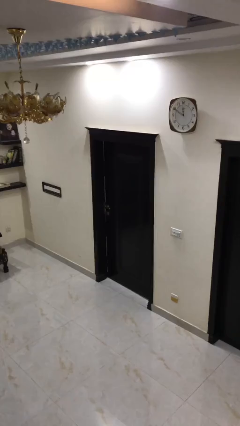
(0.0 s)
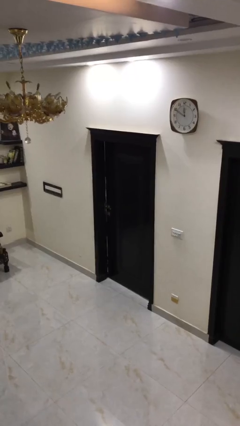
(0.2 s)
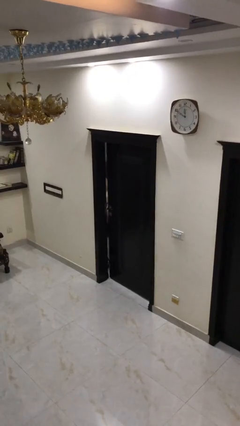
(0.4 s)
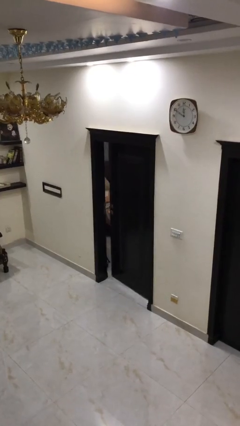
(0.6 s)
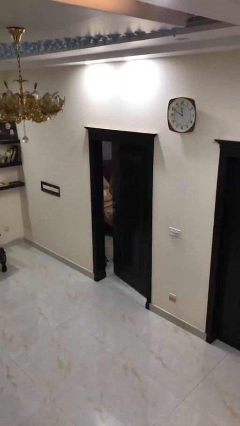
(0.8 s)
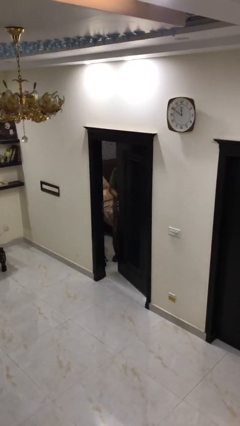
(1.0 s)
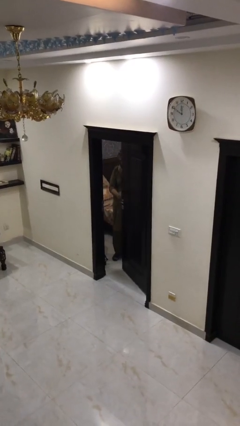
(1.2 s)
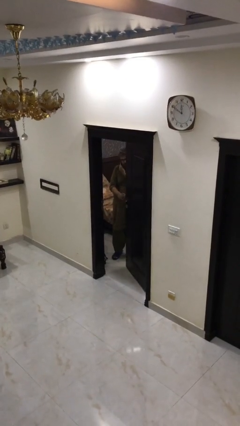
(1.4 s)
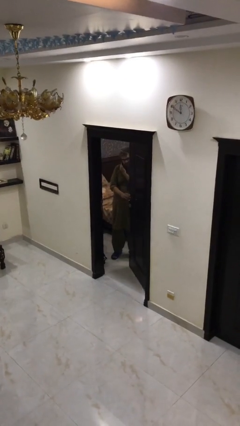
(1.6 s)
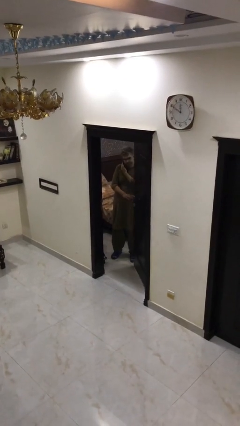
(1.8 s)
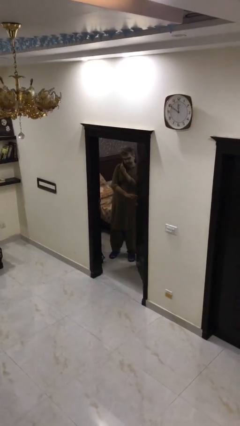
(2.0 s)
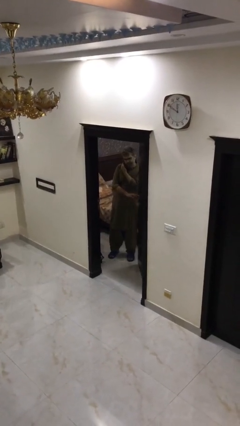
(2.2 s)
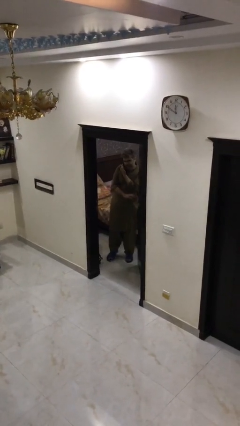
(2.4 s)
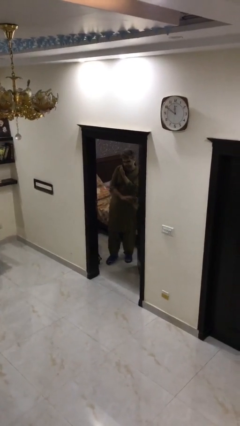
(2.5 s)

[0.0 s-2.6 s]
person opens facility door

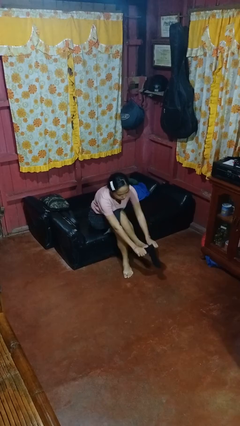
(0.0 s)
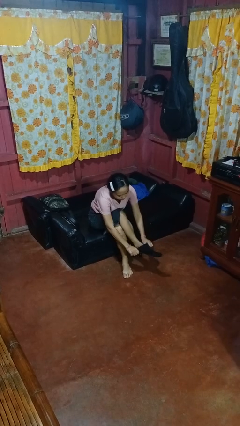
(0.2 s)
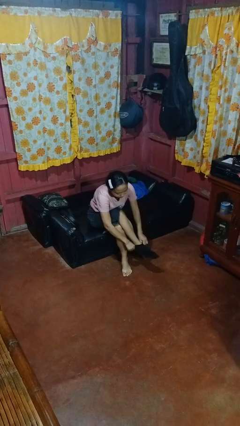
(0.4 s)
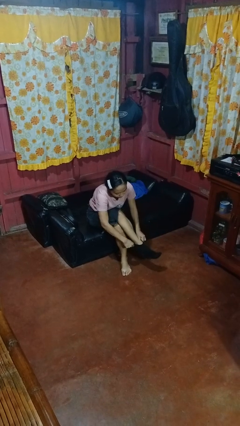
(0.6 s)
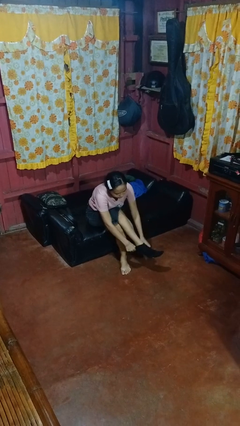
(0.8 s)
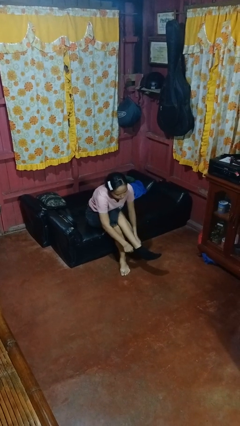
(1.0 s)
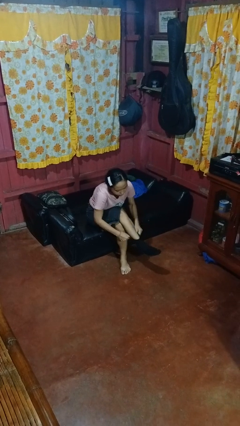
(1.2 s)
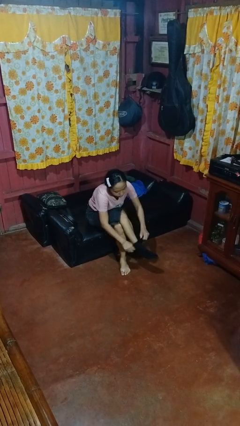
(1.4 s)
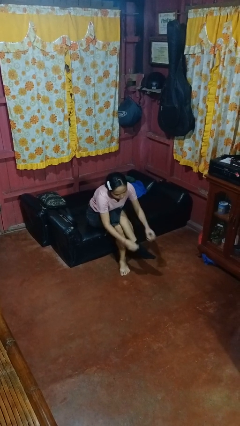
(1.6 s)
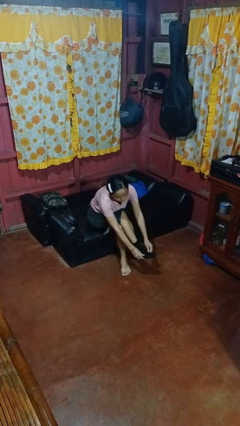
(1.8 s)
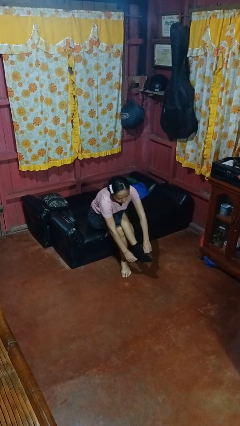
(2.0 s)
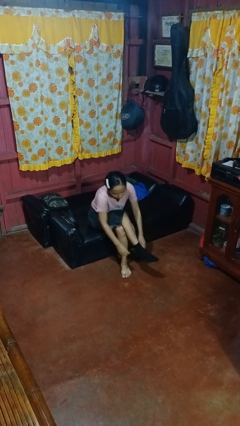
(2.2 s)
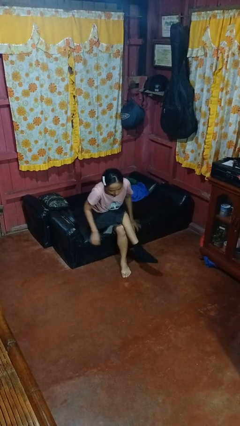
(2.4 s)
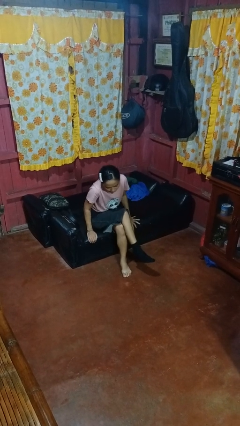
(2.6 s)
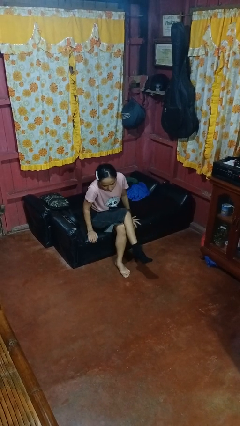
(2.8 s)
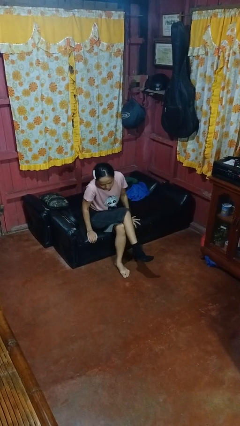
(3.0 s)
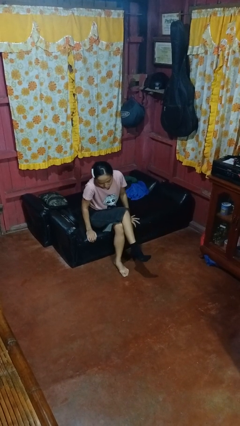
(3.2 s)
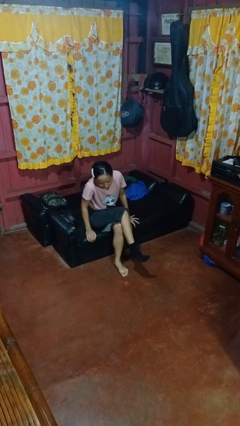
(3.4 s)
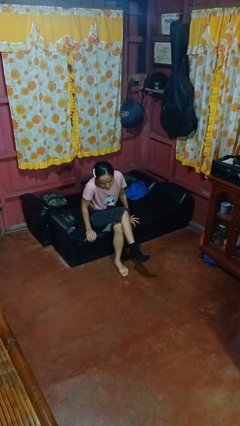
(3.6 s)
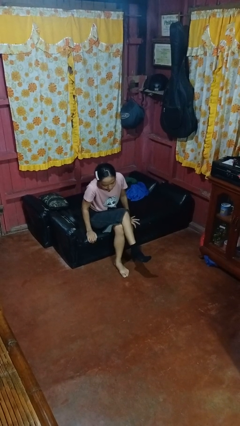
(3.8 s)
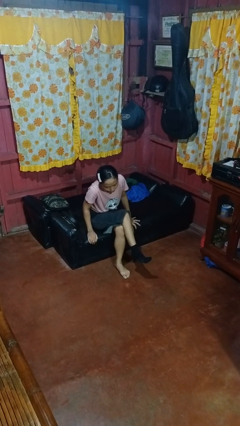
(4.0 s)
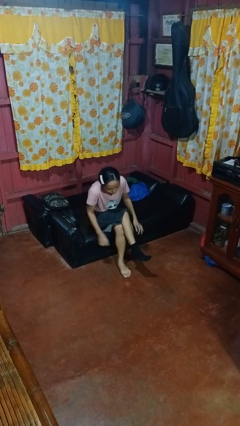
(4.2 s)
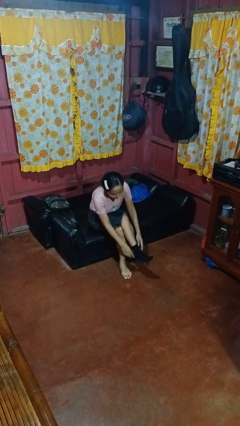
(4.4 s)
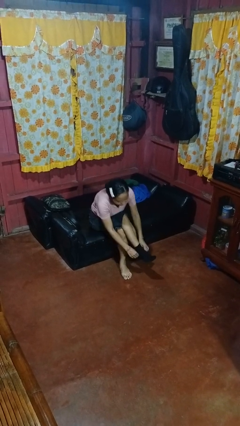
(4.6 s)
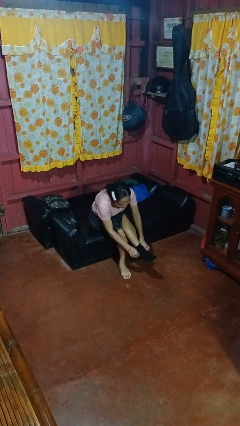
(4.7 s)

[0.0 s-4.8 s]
person puts on socks

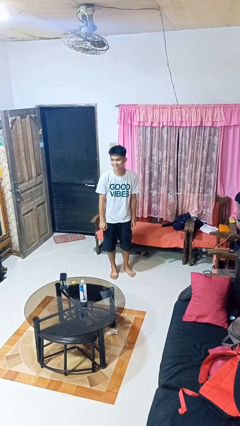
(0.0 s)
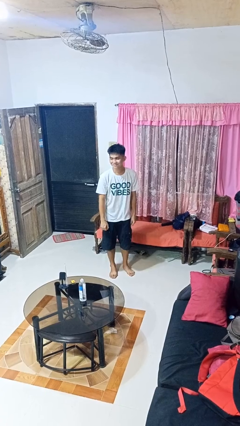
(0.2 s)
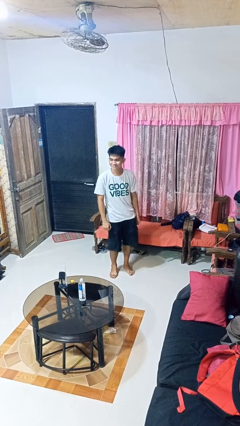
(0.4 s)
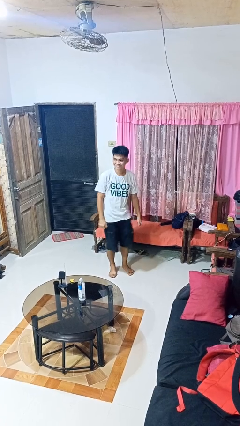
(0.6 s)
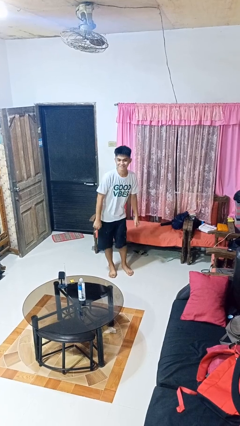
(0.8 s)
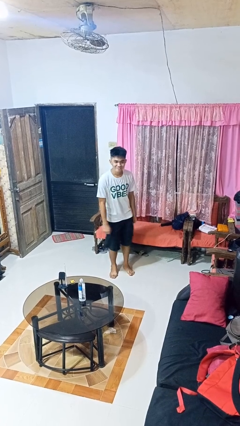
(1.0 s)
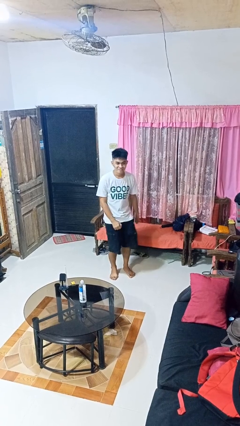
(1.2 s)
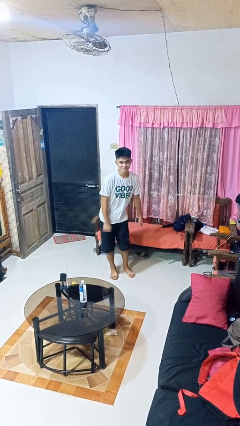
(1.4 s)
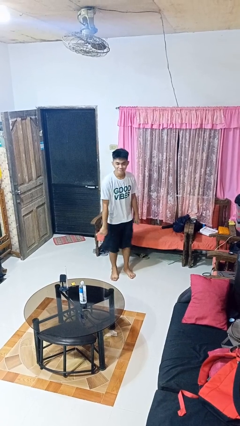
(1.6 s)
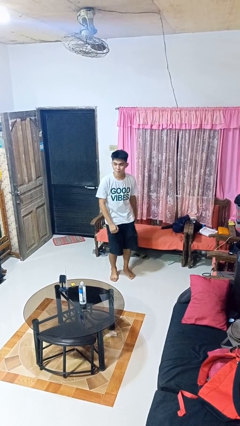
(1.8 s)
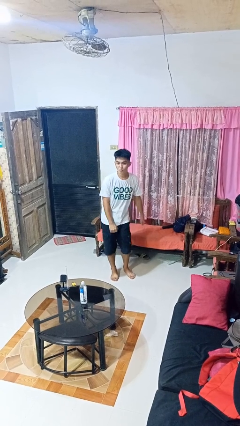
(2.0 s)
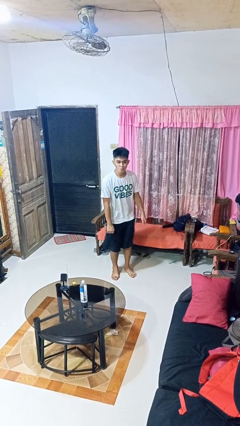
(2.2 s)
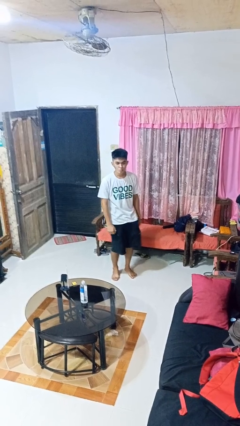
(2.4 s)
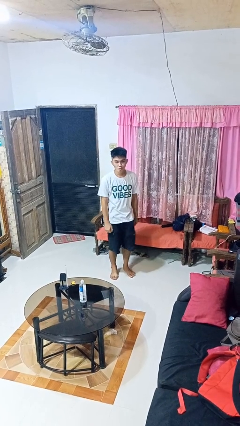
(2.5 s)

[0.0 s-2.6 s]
person wiggles hips

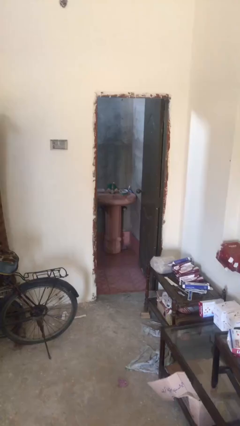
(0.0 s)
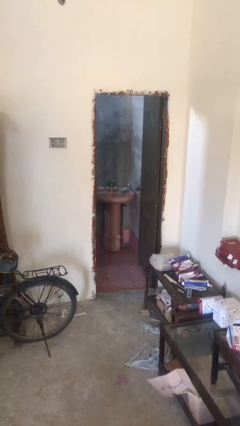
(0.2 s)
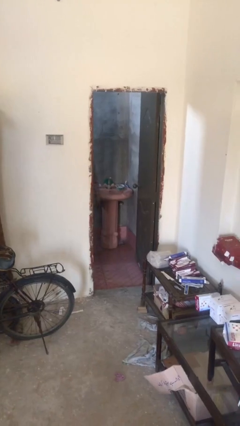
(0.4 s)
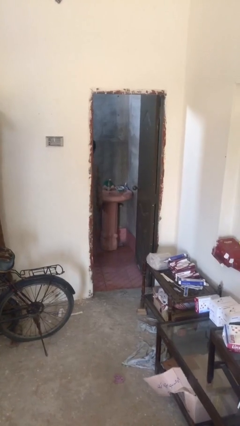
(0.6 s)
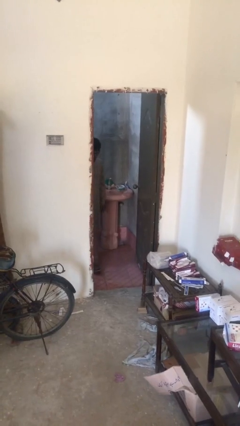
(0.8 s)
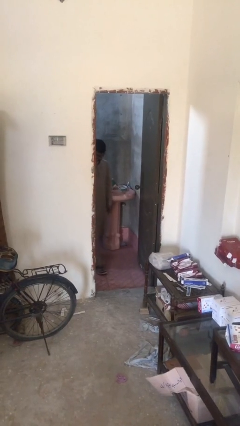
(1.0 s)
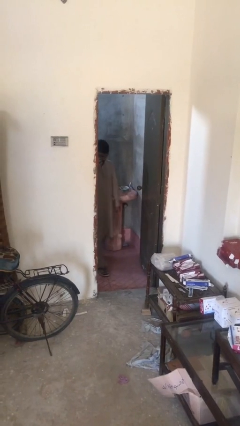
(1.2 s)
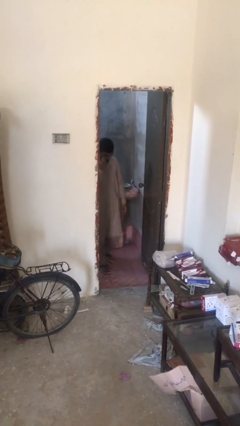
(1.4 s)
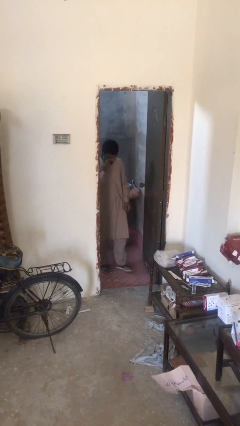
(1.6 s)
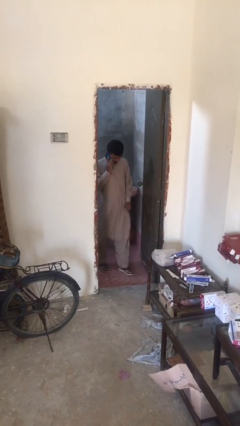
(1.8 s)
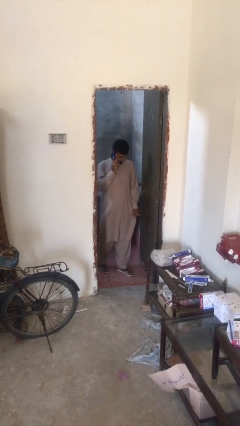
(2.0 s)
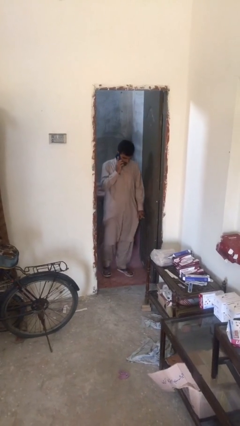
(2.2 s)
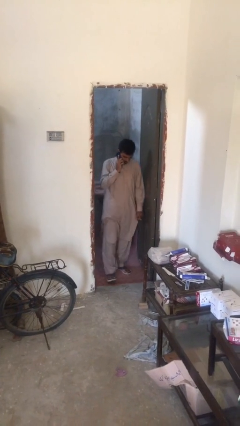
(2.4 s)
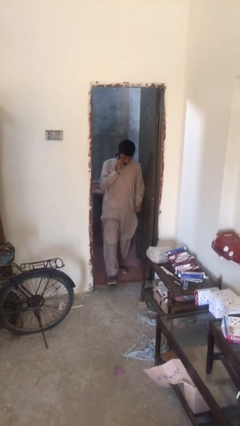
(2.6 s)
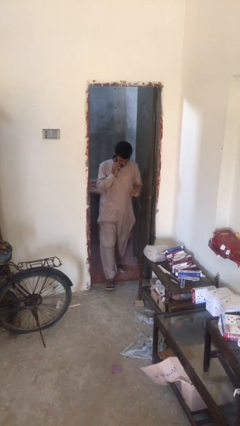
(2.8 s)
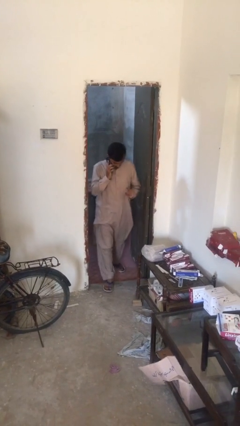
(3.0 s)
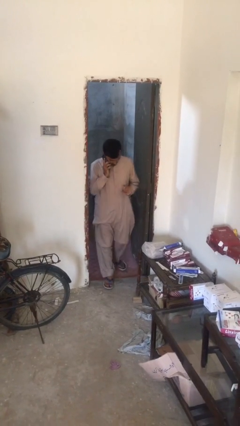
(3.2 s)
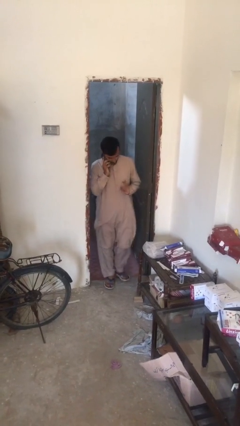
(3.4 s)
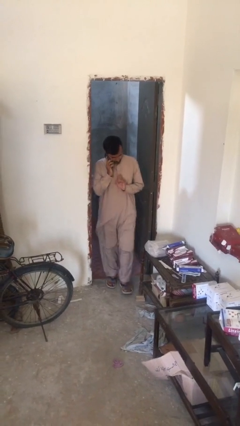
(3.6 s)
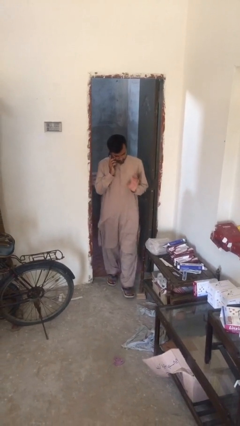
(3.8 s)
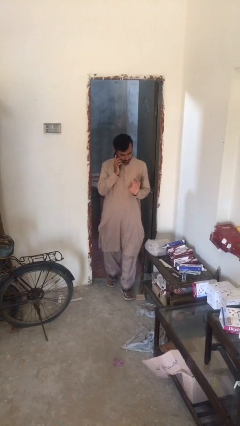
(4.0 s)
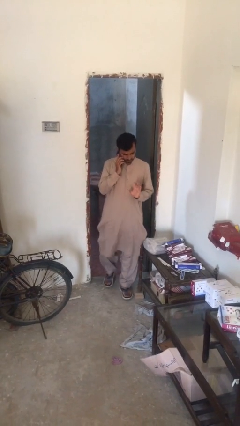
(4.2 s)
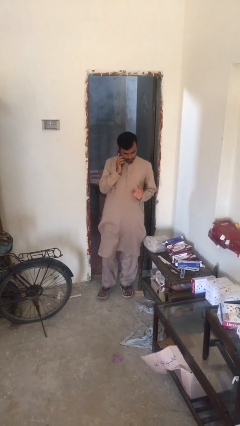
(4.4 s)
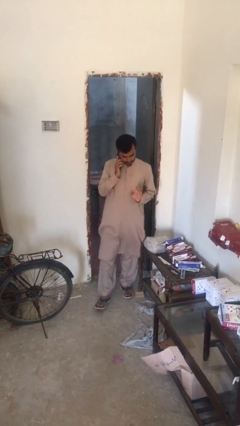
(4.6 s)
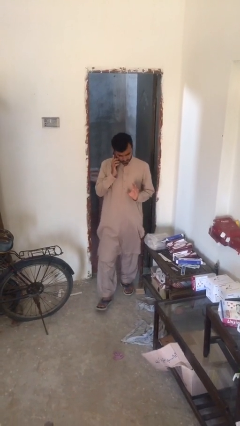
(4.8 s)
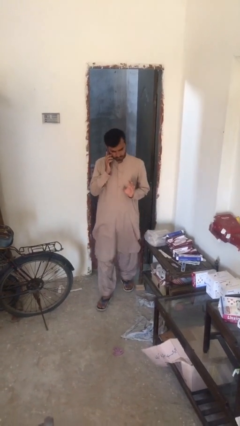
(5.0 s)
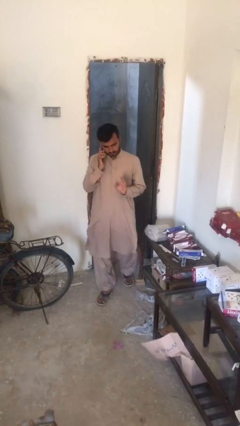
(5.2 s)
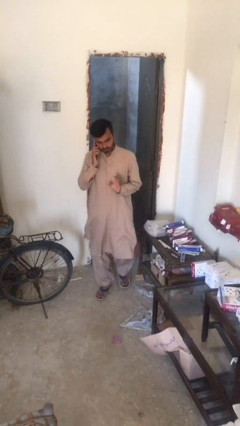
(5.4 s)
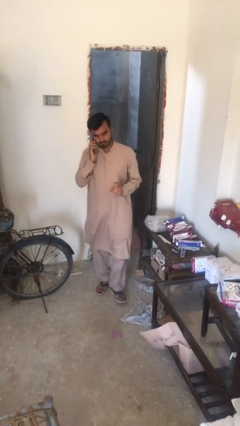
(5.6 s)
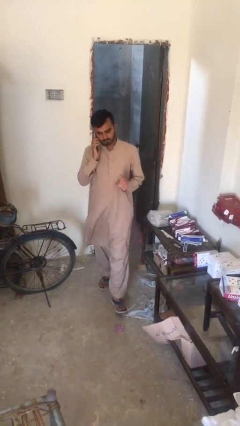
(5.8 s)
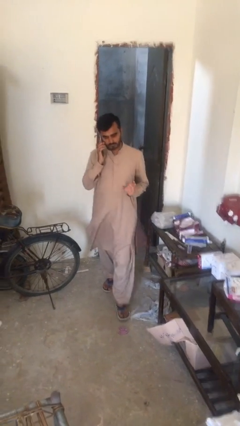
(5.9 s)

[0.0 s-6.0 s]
person enters scene through structure

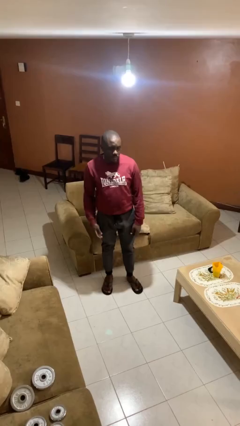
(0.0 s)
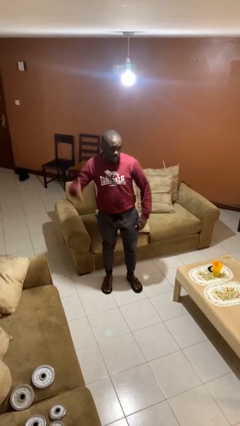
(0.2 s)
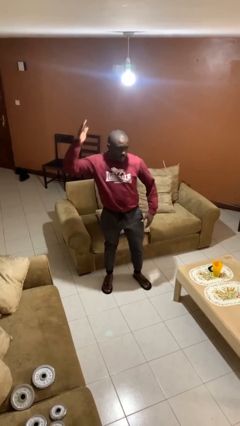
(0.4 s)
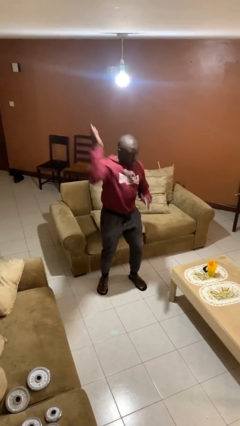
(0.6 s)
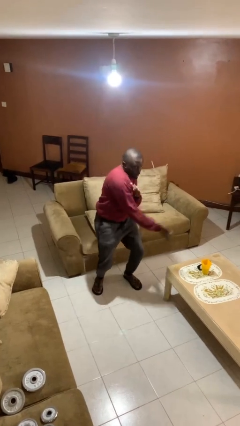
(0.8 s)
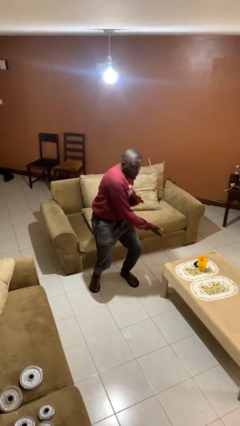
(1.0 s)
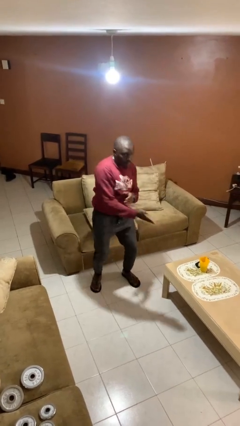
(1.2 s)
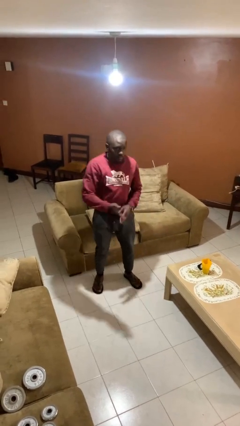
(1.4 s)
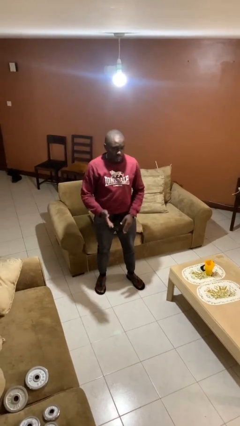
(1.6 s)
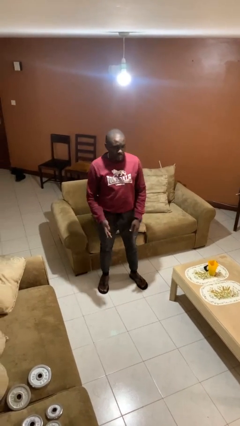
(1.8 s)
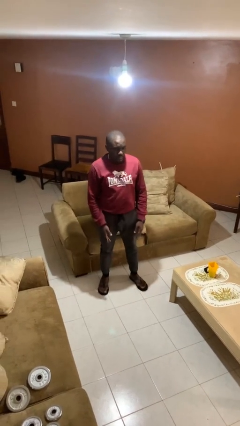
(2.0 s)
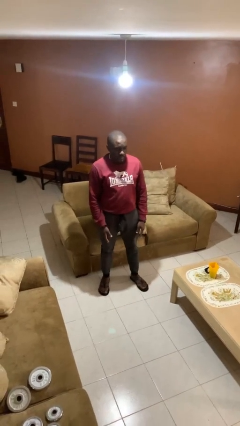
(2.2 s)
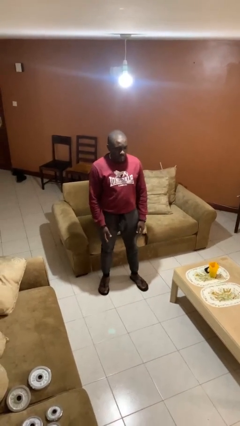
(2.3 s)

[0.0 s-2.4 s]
person karate chop
